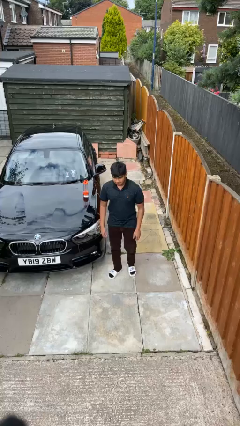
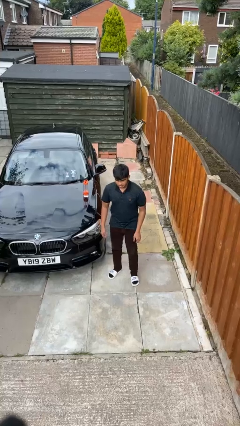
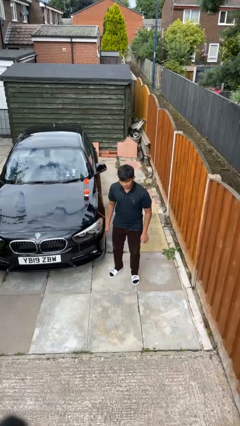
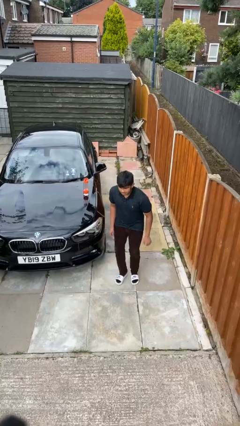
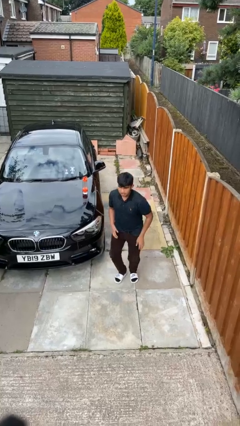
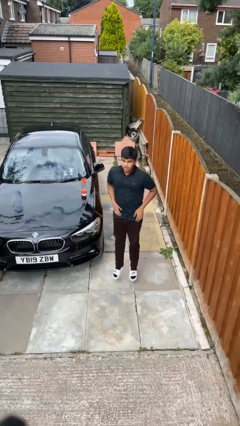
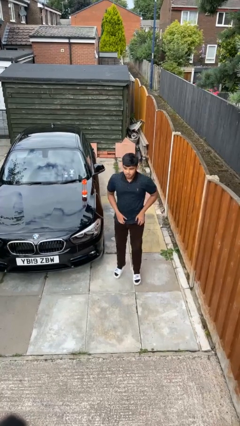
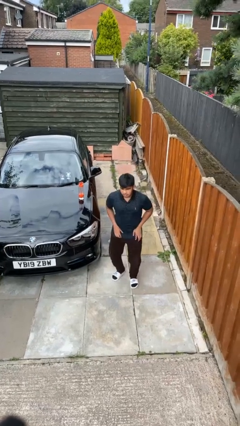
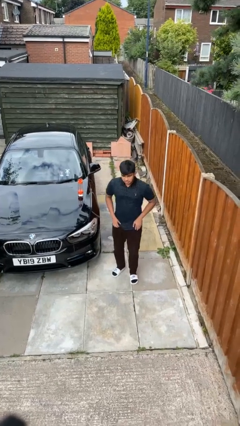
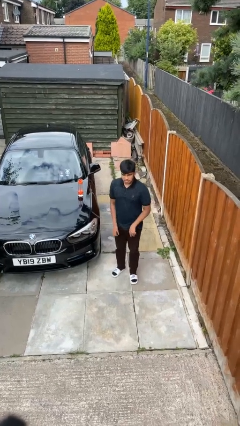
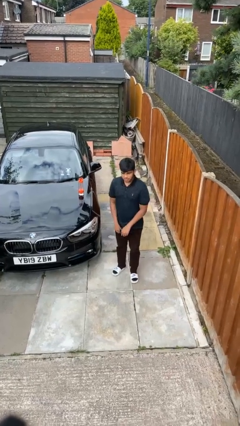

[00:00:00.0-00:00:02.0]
person jumps

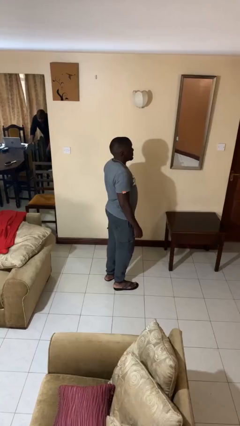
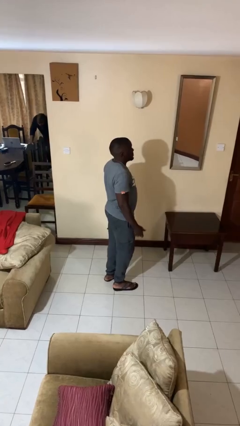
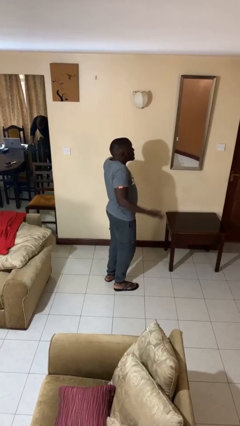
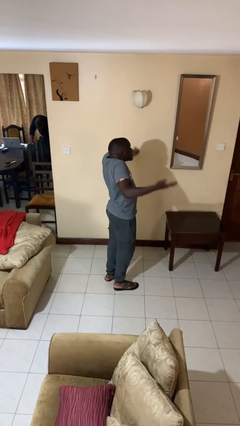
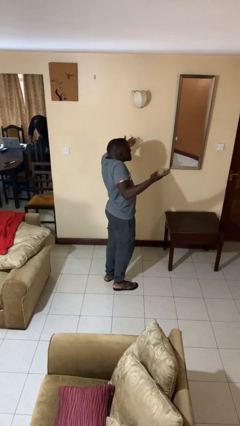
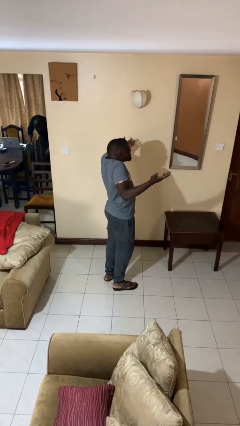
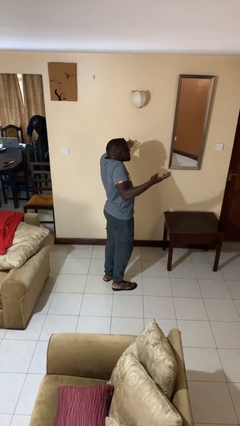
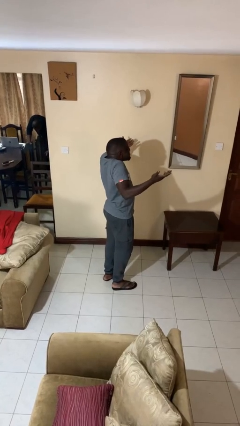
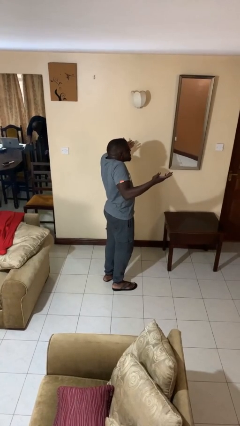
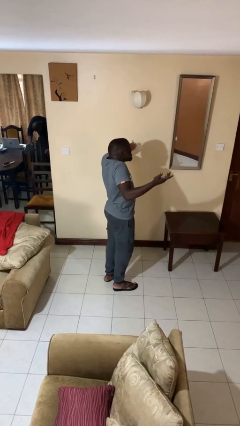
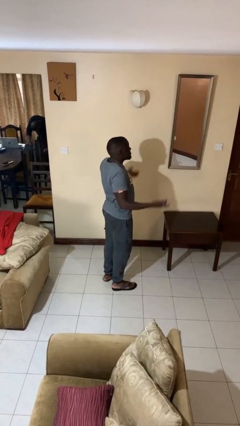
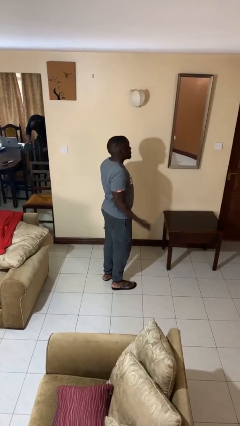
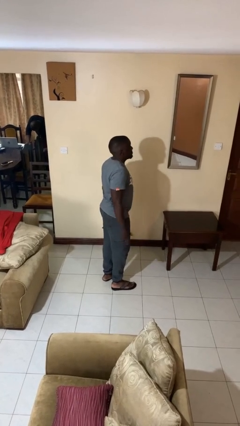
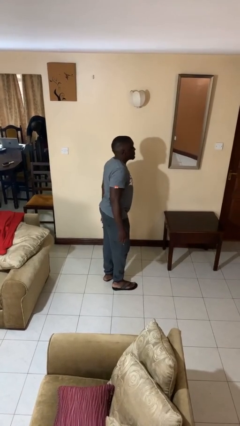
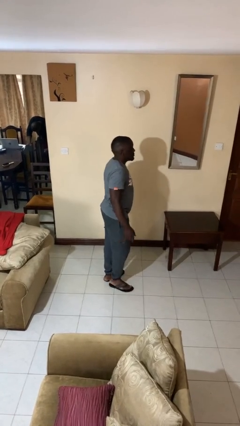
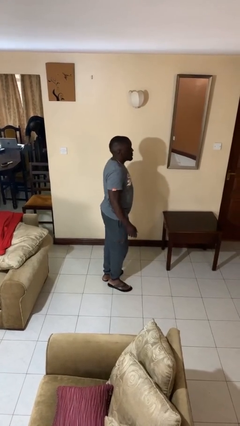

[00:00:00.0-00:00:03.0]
person shrugs

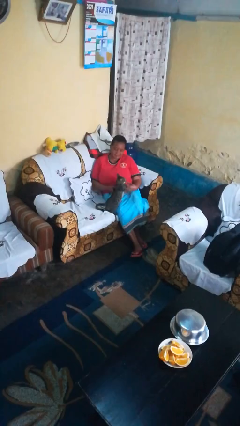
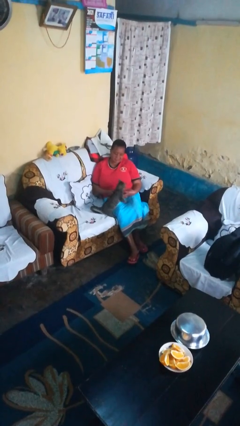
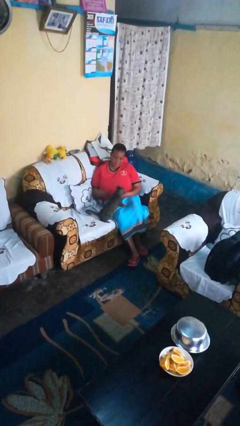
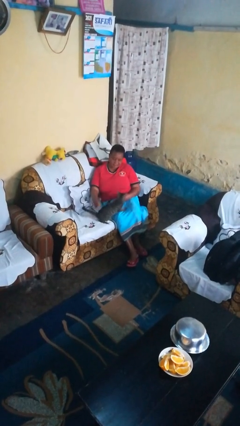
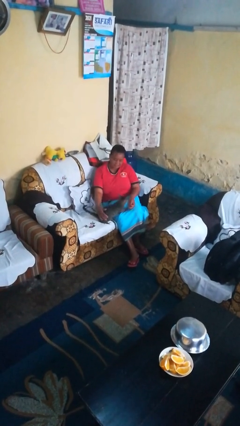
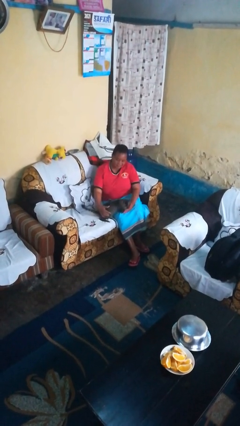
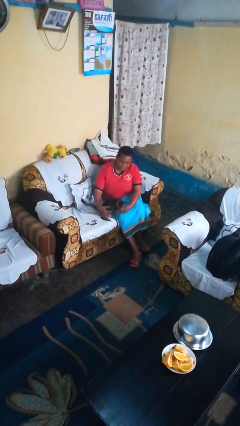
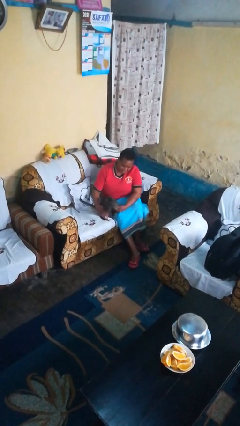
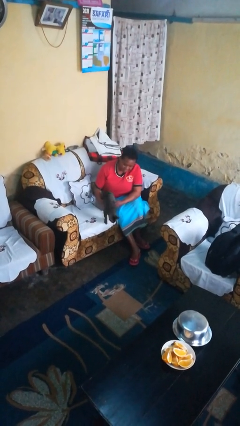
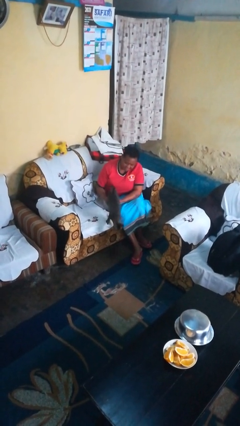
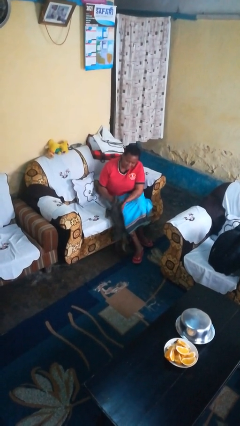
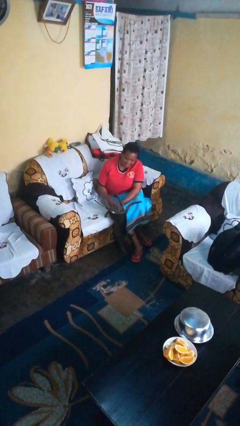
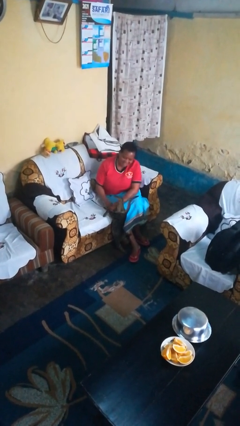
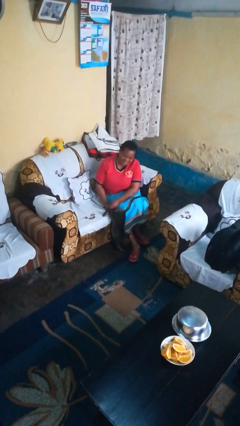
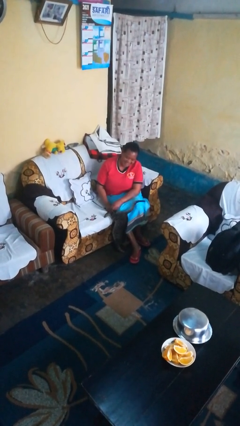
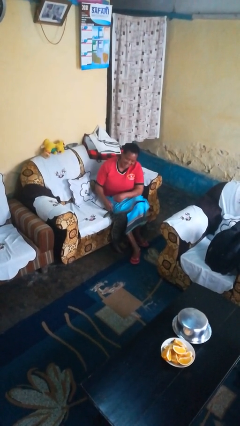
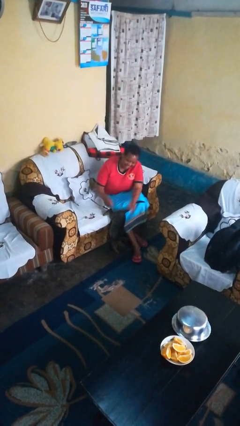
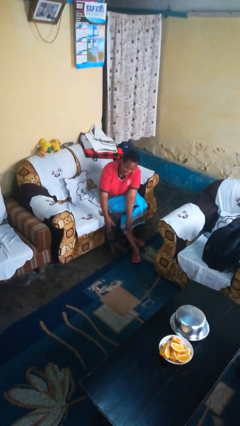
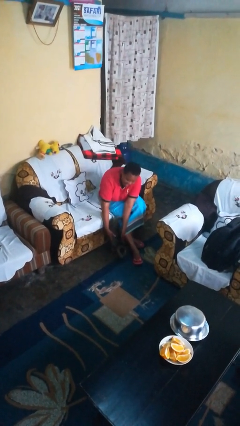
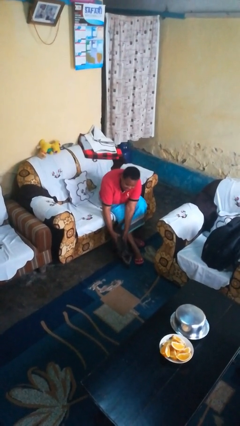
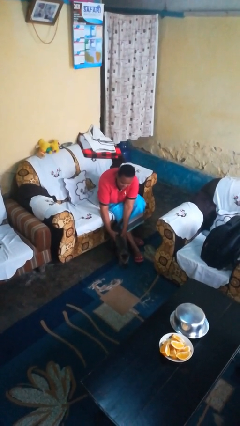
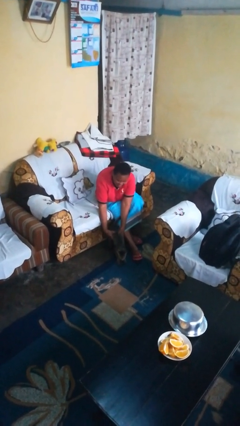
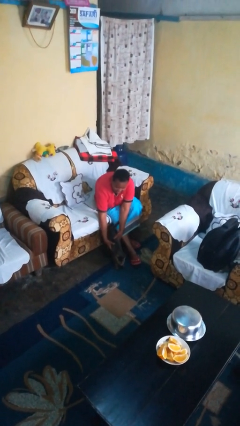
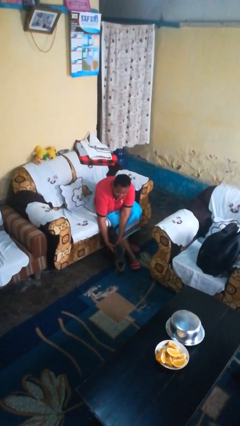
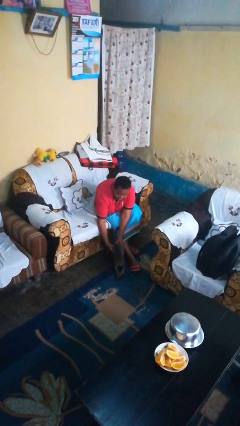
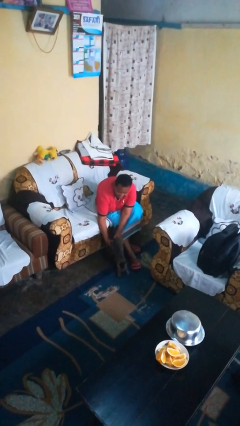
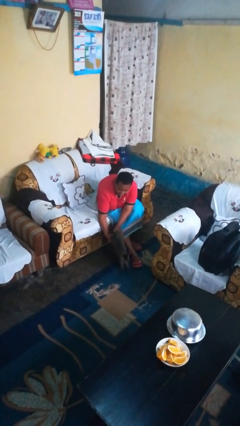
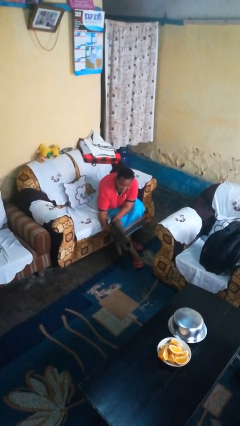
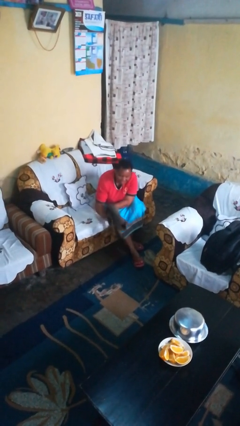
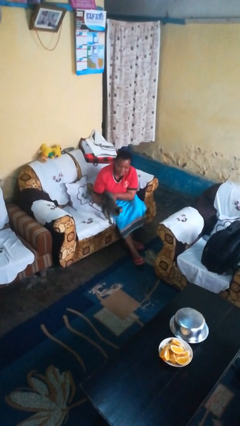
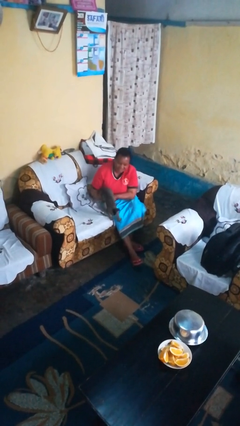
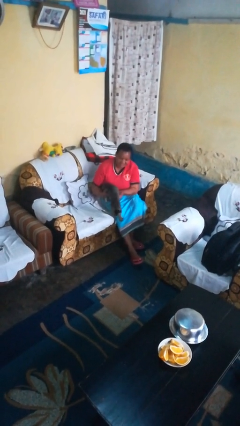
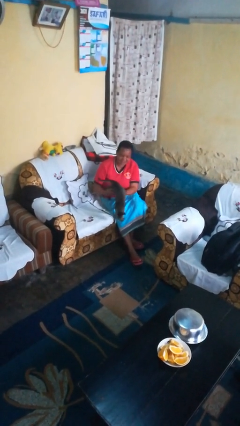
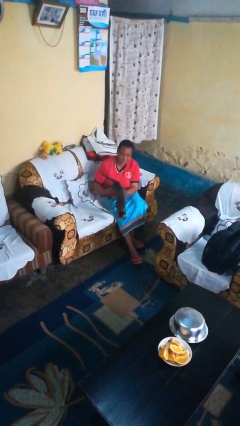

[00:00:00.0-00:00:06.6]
person hugs cat

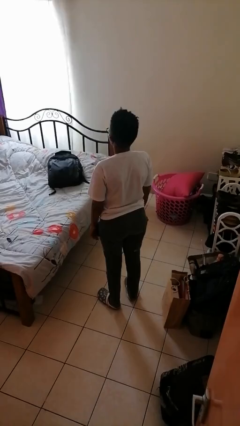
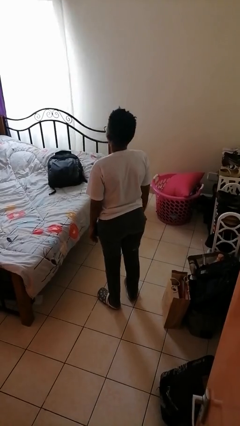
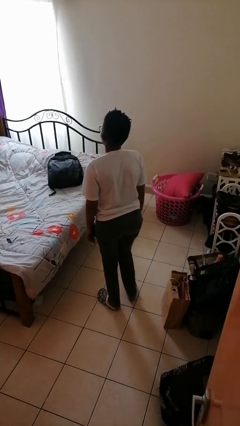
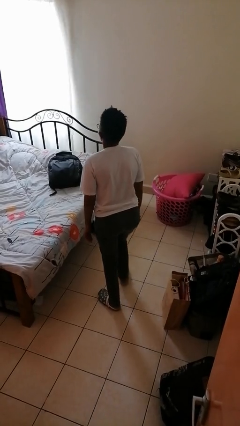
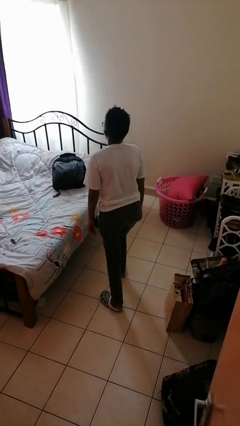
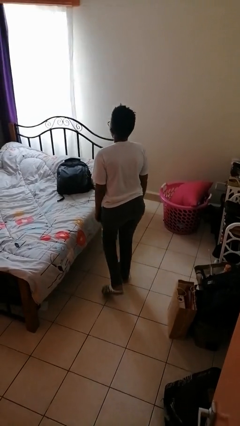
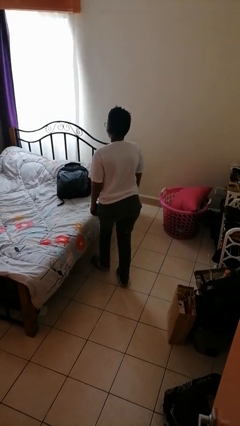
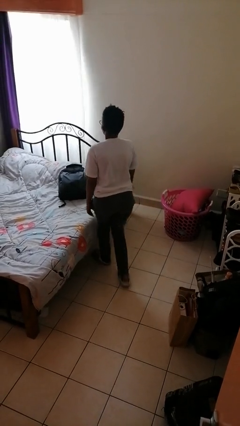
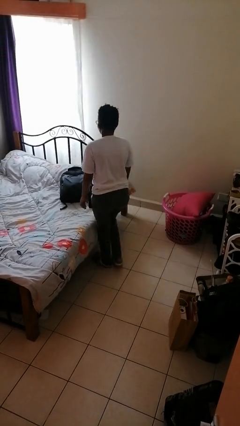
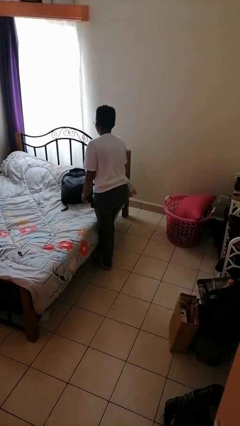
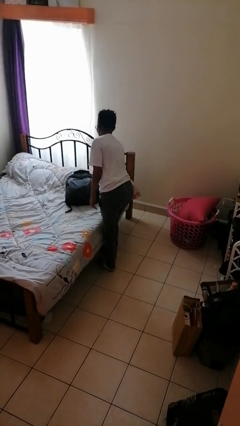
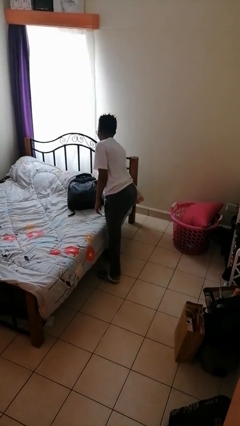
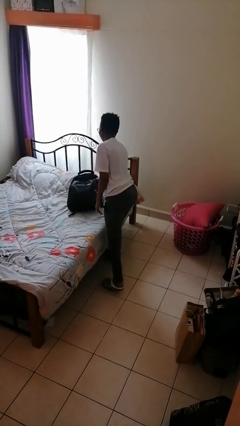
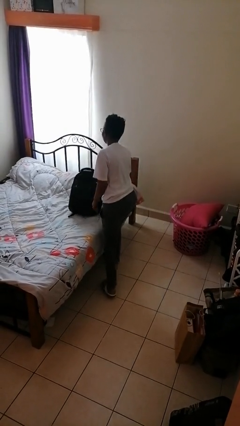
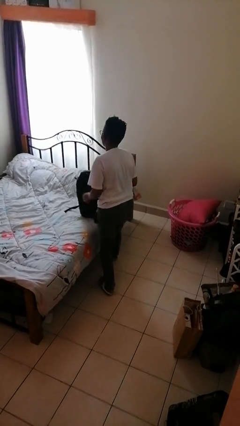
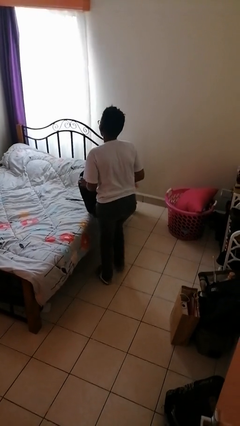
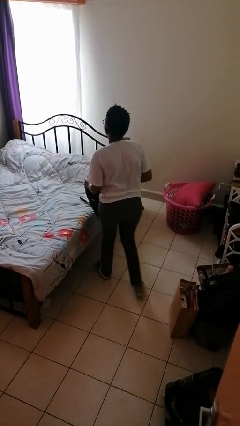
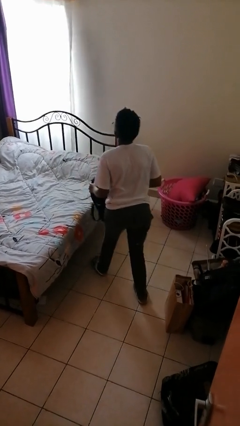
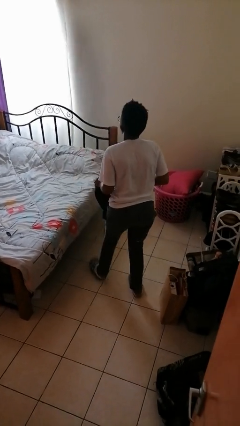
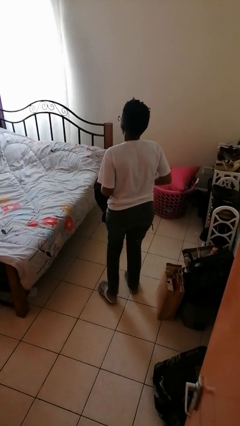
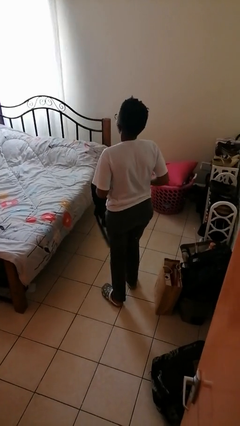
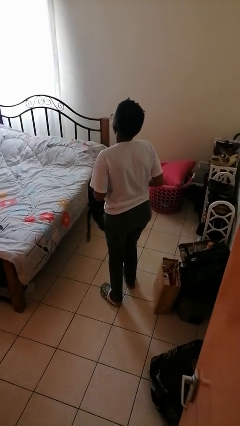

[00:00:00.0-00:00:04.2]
person picks up object from bed

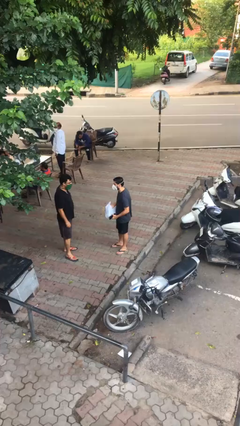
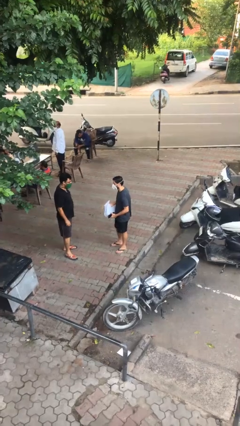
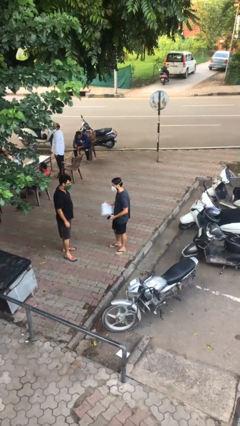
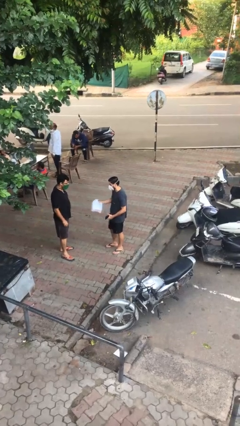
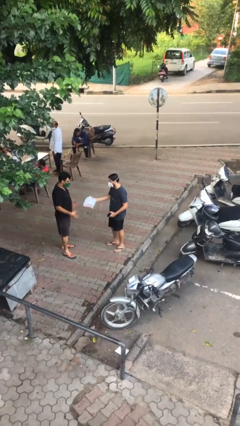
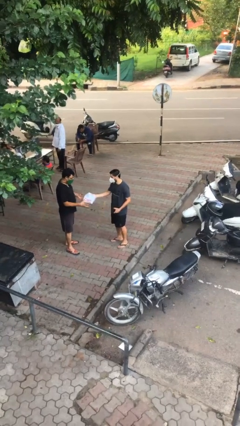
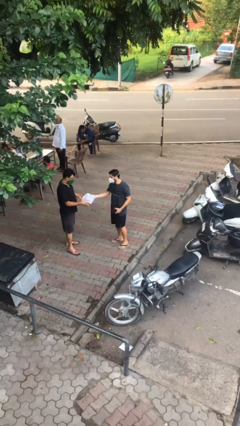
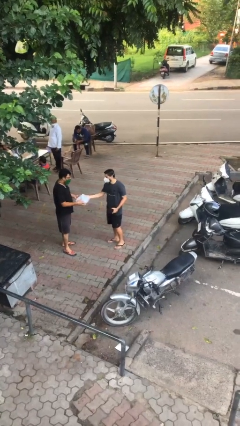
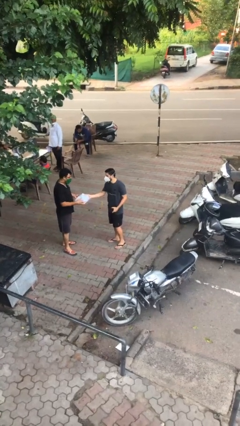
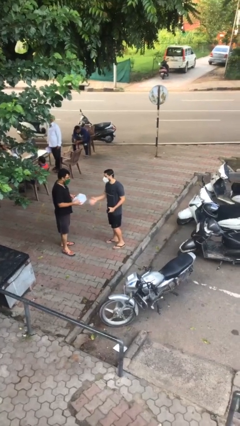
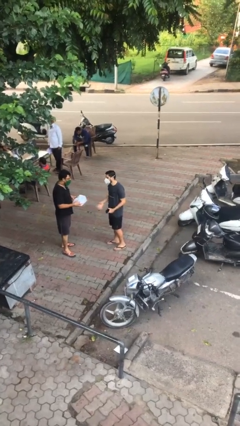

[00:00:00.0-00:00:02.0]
person transfers object to person
